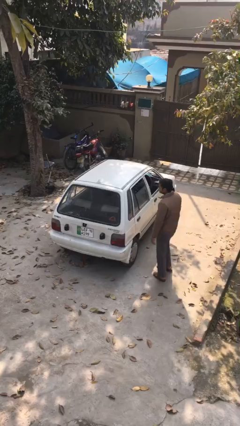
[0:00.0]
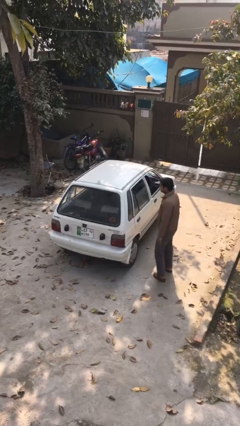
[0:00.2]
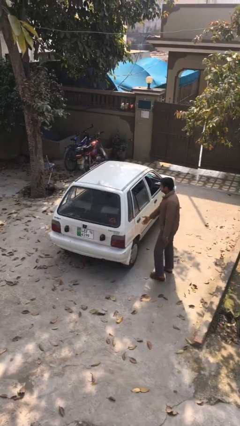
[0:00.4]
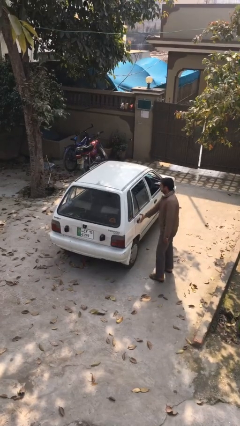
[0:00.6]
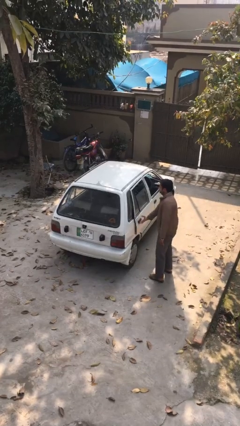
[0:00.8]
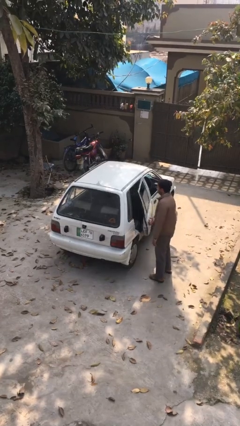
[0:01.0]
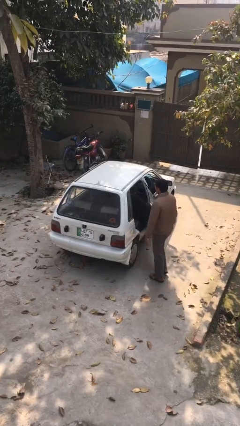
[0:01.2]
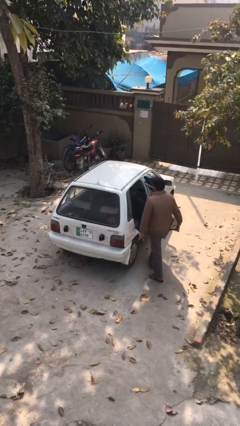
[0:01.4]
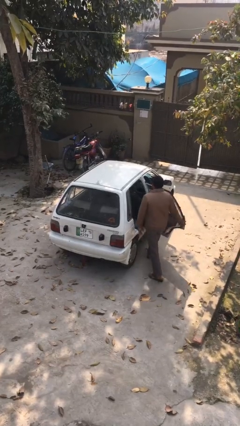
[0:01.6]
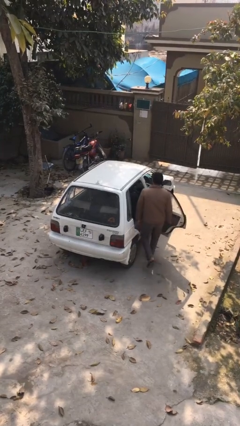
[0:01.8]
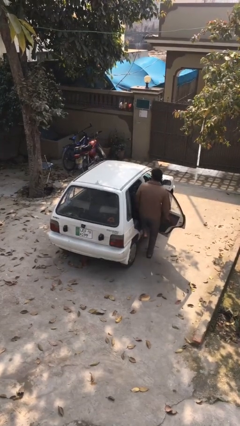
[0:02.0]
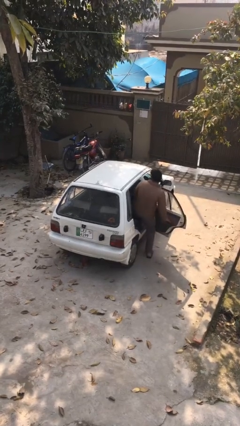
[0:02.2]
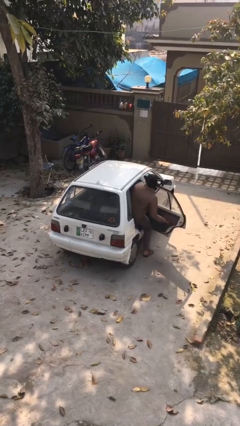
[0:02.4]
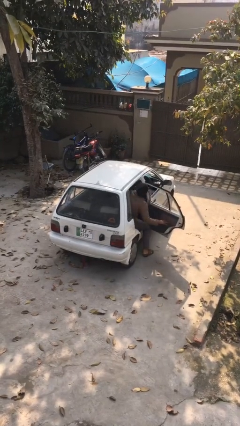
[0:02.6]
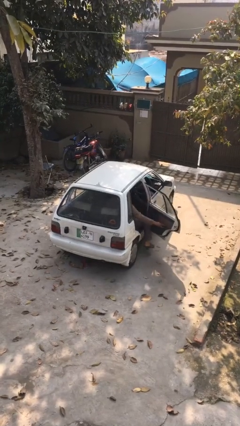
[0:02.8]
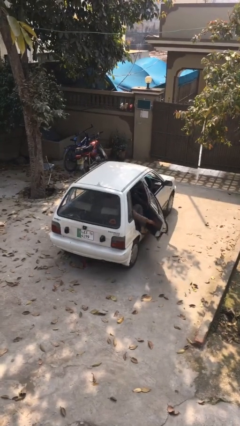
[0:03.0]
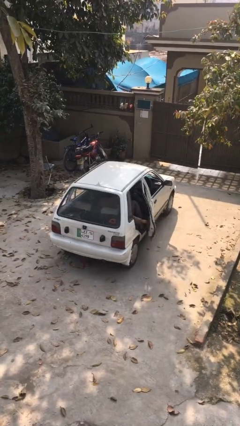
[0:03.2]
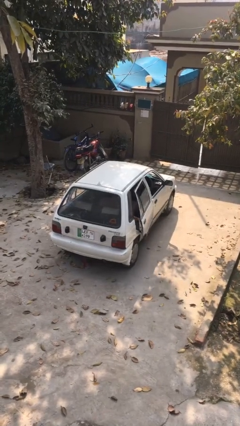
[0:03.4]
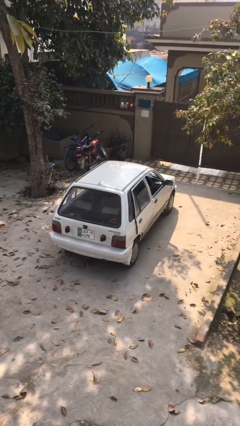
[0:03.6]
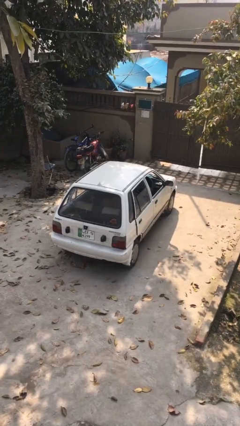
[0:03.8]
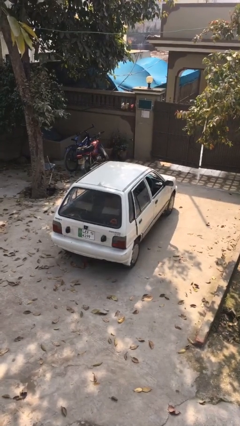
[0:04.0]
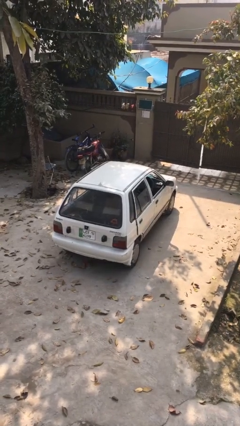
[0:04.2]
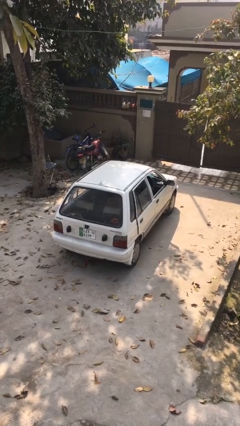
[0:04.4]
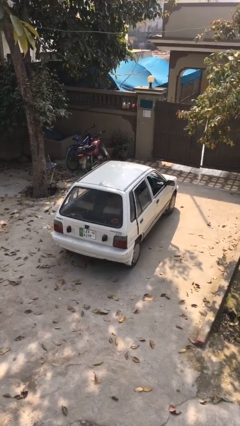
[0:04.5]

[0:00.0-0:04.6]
car picks up person

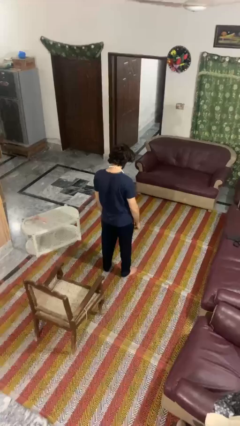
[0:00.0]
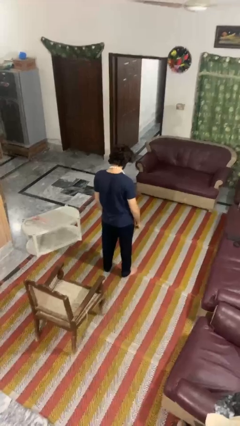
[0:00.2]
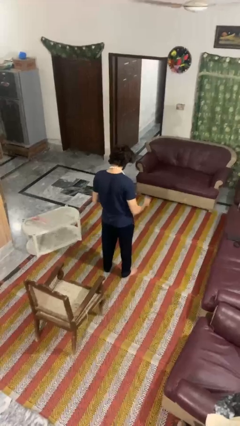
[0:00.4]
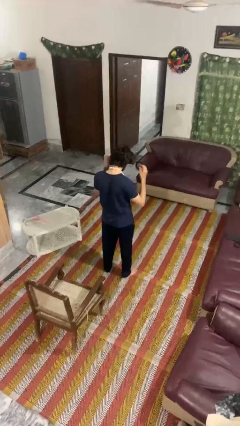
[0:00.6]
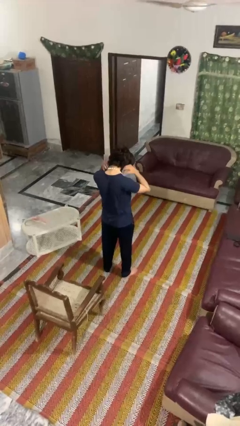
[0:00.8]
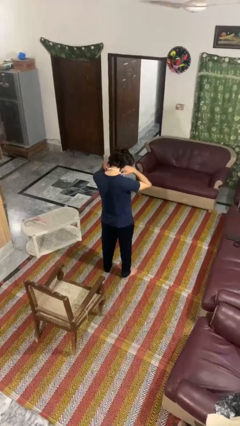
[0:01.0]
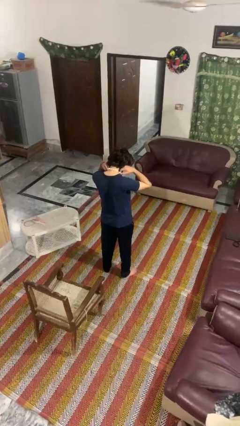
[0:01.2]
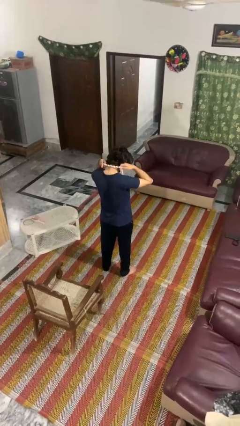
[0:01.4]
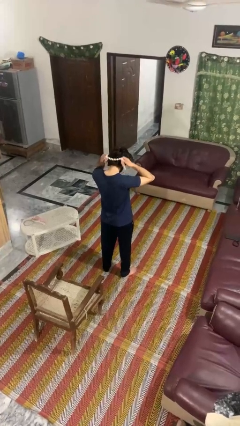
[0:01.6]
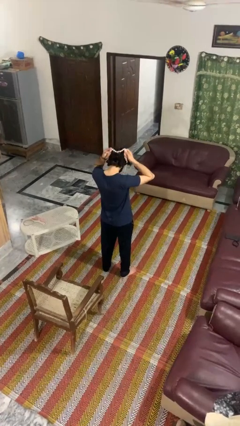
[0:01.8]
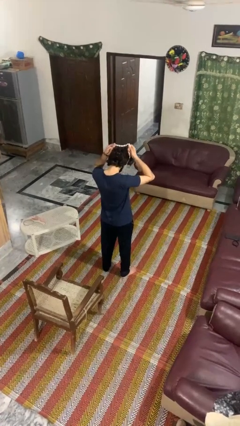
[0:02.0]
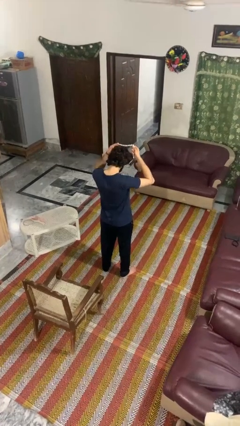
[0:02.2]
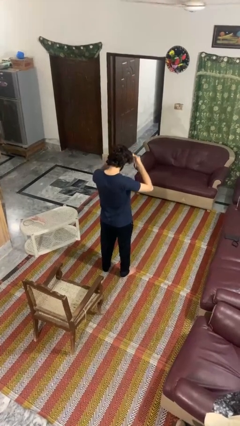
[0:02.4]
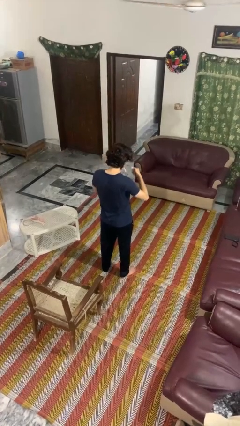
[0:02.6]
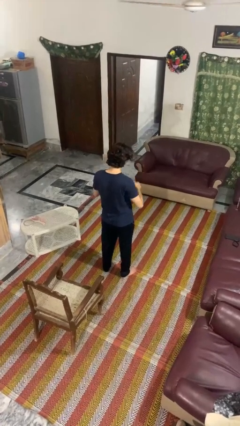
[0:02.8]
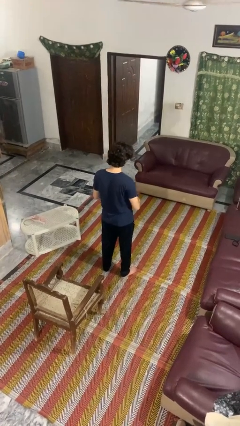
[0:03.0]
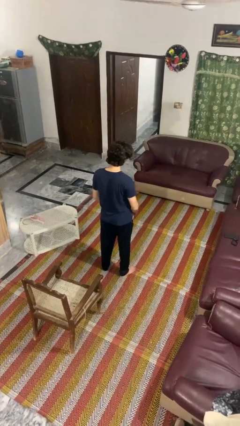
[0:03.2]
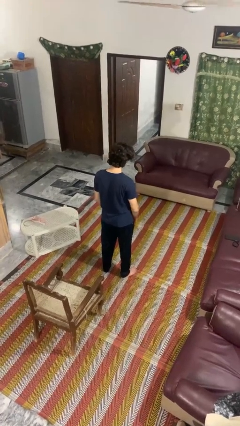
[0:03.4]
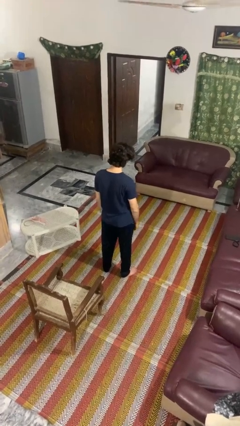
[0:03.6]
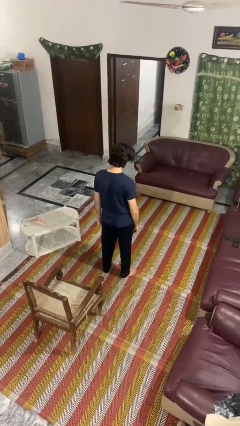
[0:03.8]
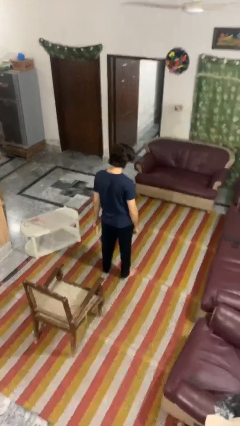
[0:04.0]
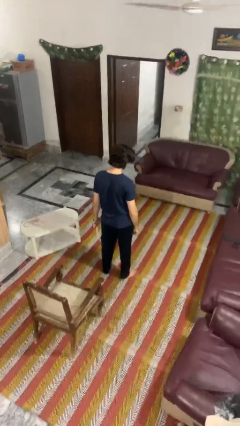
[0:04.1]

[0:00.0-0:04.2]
person takes off necklace

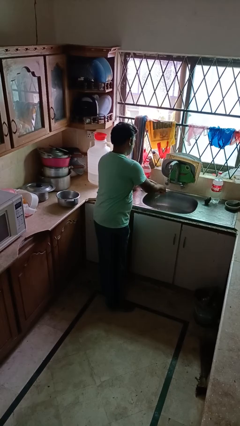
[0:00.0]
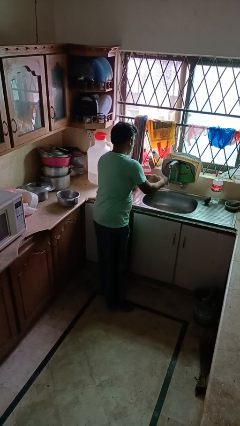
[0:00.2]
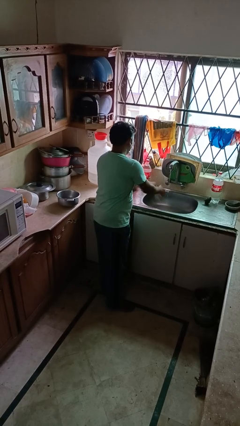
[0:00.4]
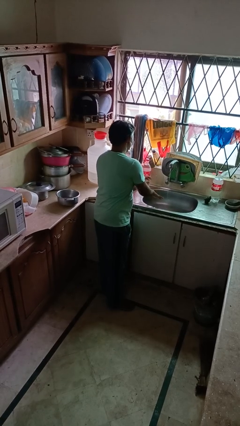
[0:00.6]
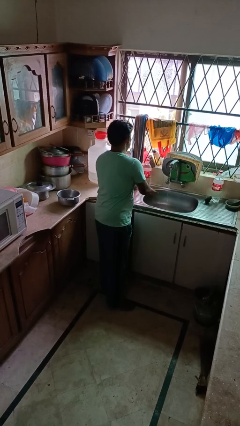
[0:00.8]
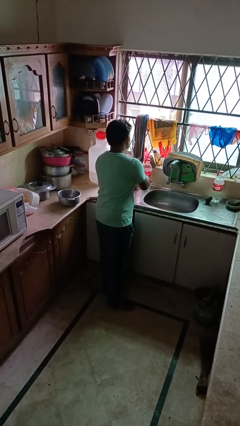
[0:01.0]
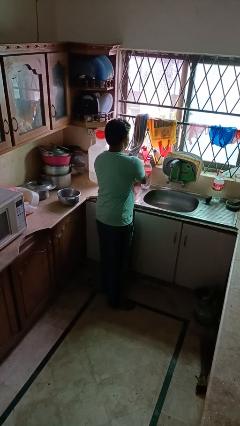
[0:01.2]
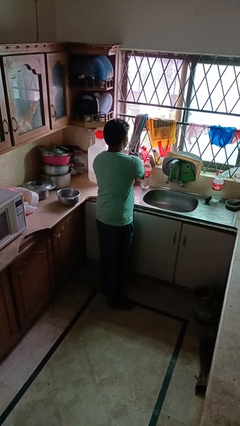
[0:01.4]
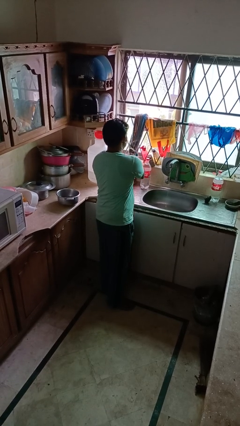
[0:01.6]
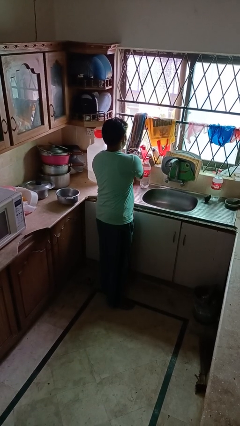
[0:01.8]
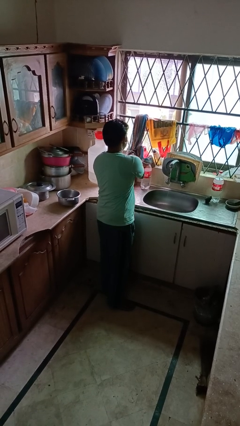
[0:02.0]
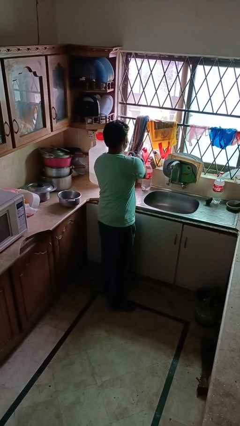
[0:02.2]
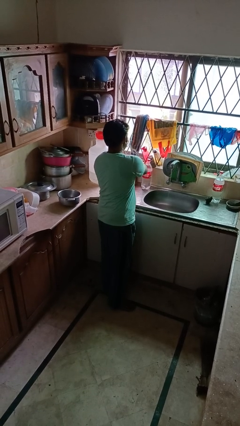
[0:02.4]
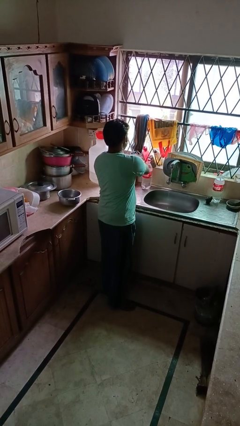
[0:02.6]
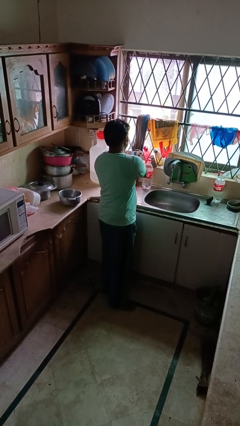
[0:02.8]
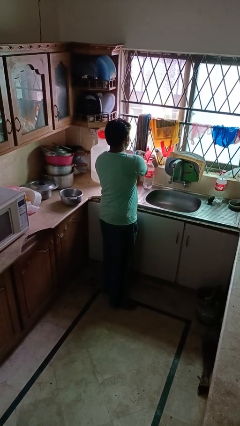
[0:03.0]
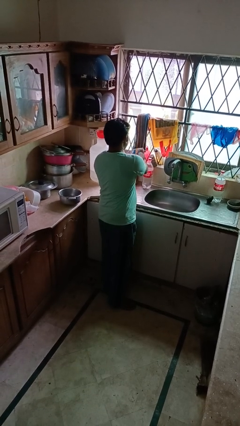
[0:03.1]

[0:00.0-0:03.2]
person dries hands with towel

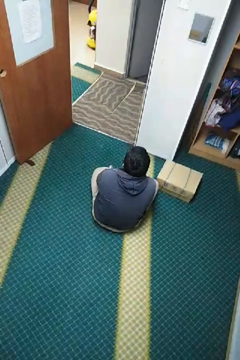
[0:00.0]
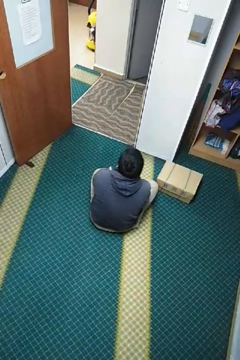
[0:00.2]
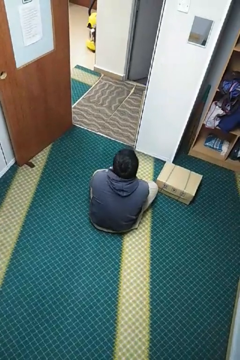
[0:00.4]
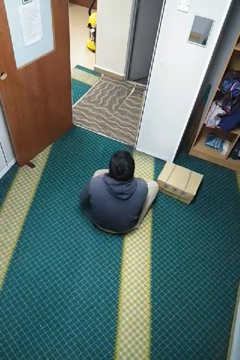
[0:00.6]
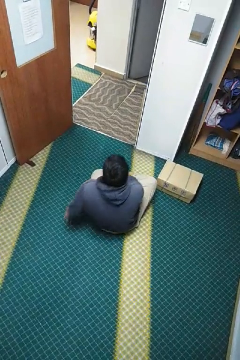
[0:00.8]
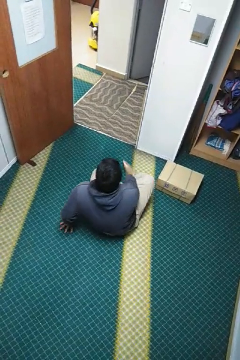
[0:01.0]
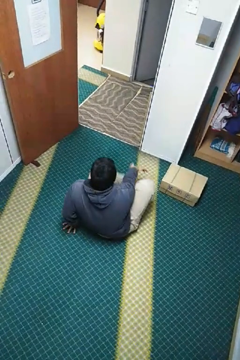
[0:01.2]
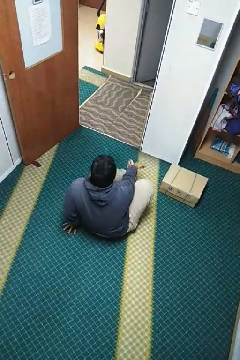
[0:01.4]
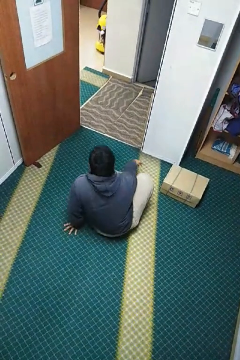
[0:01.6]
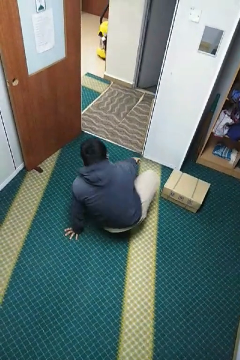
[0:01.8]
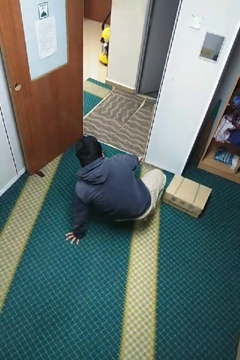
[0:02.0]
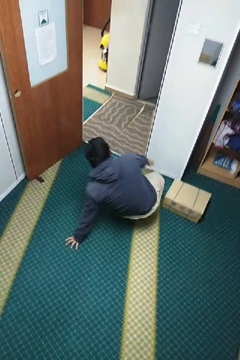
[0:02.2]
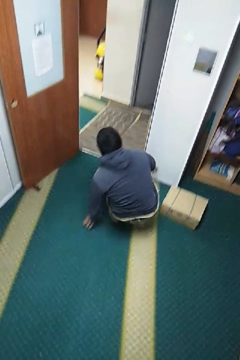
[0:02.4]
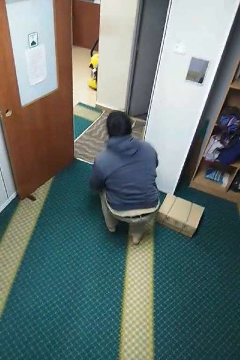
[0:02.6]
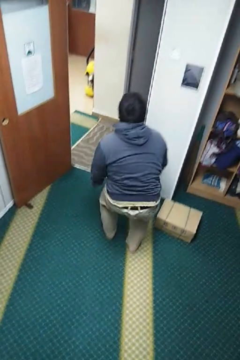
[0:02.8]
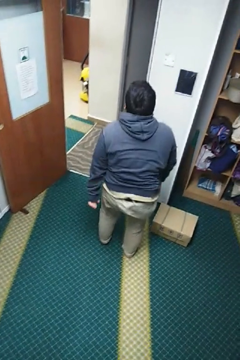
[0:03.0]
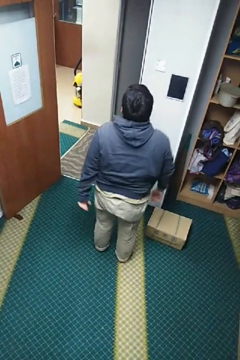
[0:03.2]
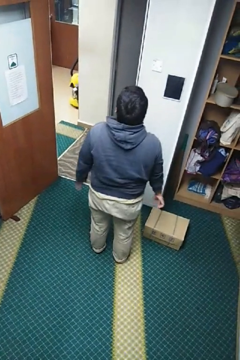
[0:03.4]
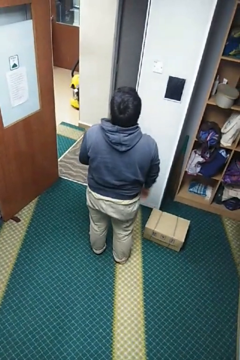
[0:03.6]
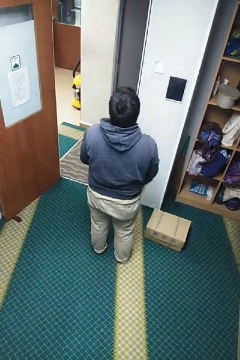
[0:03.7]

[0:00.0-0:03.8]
person stands up from floor

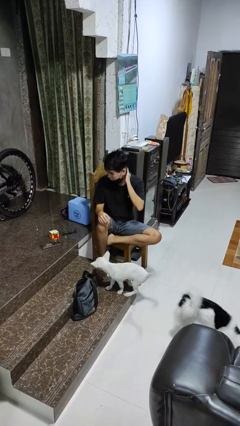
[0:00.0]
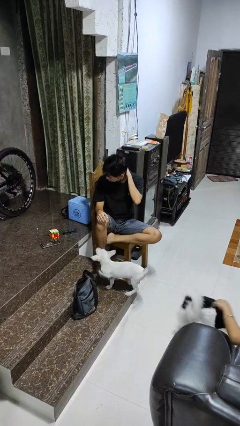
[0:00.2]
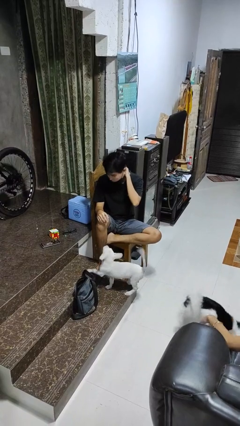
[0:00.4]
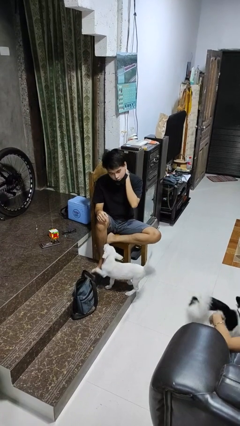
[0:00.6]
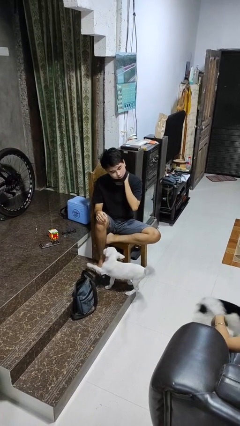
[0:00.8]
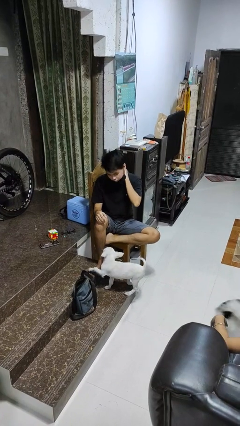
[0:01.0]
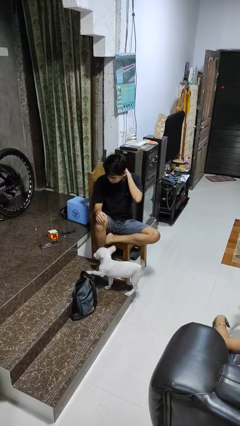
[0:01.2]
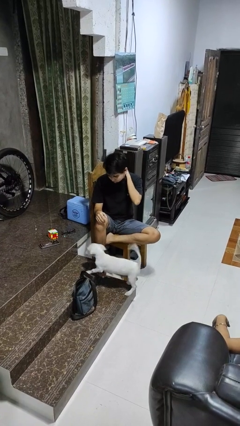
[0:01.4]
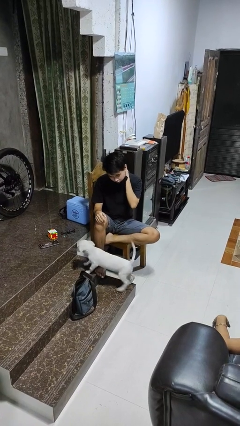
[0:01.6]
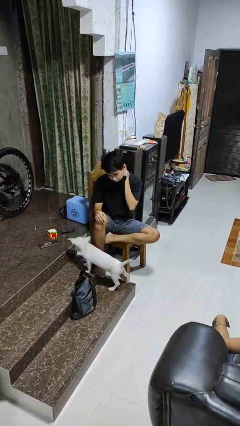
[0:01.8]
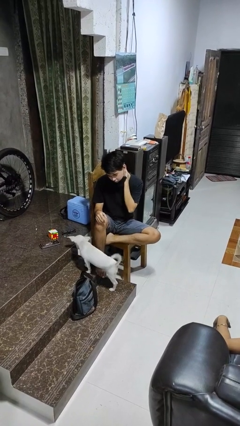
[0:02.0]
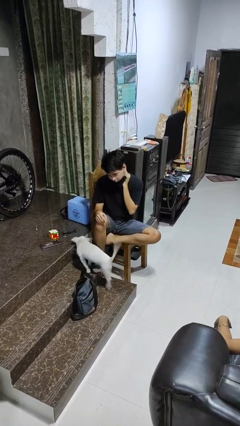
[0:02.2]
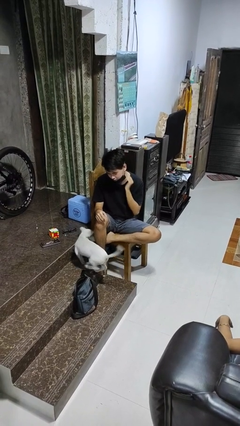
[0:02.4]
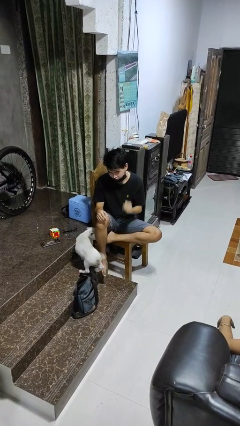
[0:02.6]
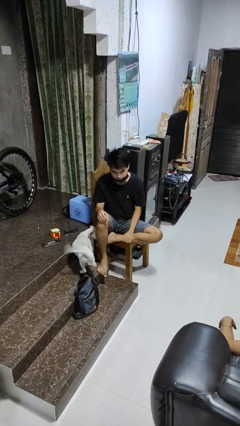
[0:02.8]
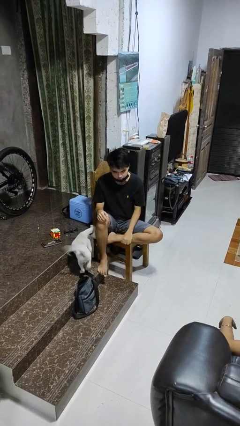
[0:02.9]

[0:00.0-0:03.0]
person rubs neck
